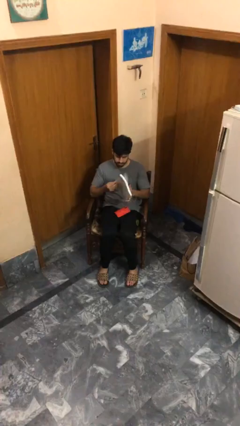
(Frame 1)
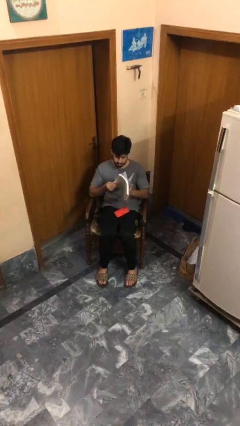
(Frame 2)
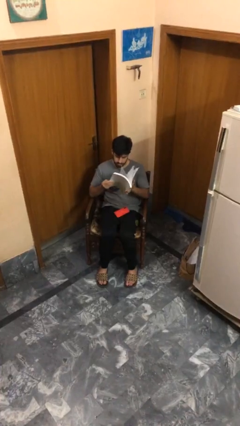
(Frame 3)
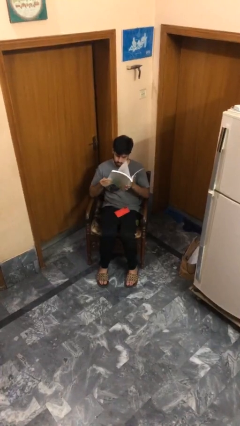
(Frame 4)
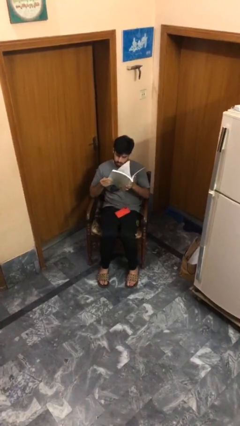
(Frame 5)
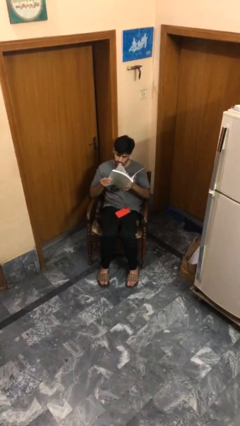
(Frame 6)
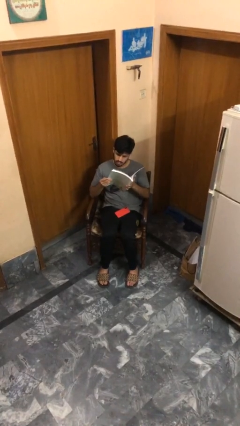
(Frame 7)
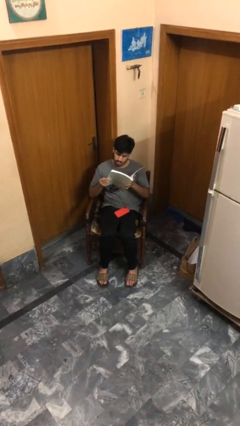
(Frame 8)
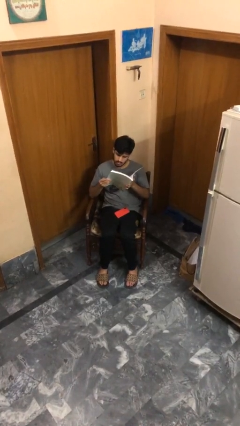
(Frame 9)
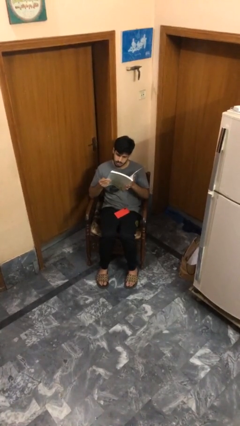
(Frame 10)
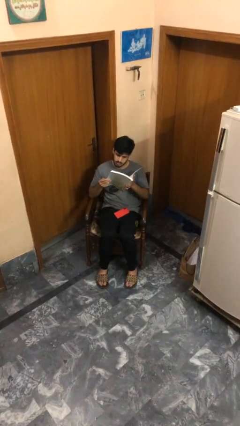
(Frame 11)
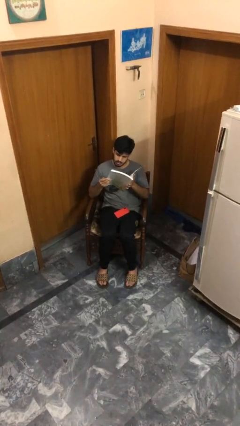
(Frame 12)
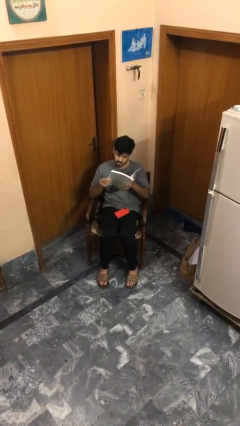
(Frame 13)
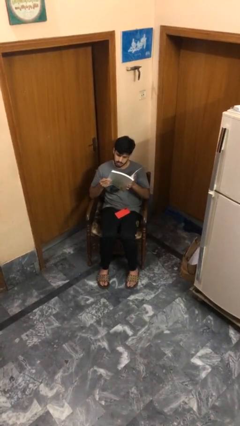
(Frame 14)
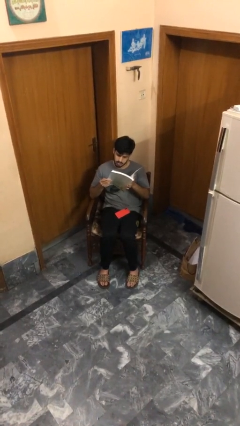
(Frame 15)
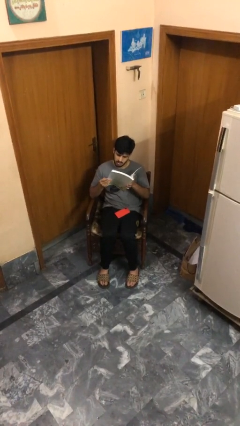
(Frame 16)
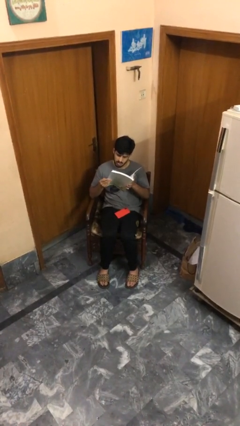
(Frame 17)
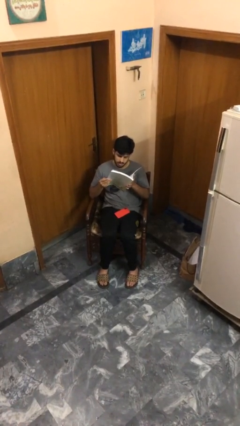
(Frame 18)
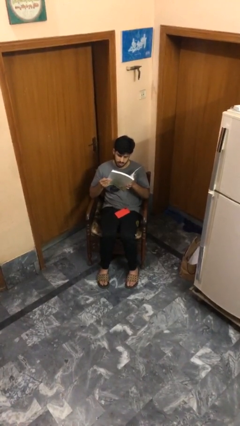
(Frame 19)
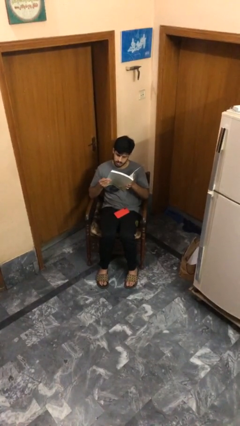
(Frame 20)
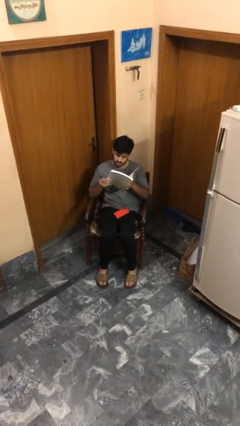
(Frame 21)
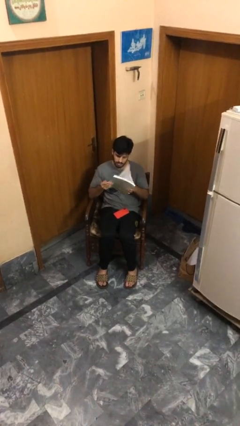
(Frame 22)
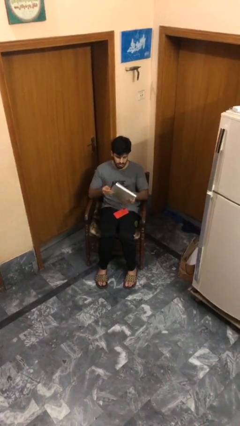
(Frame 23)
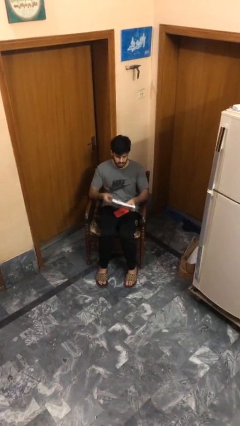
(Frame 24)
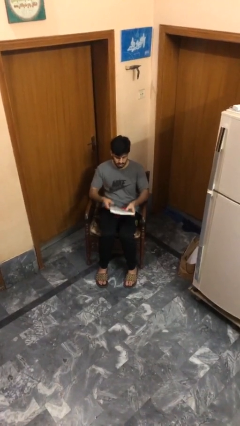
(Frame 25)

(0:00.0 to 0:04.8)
person reads book

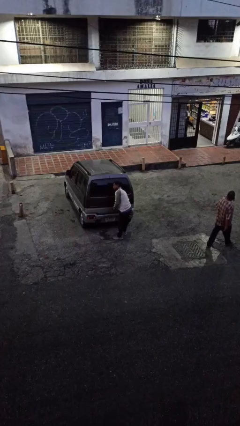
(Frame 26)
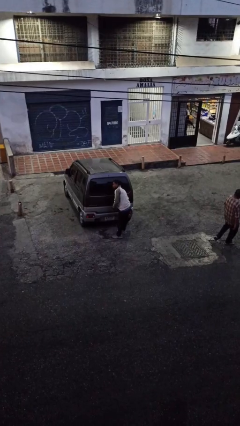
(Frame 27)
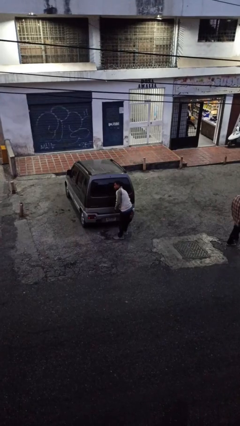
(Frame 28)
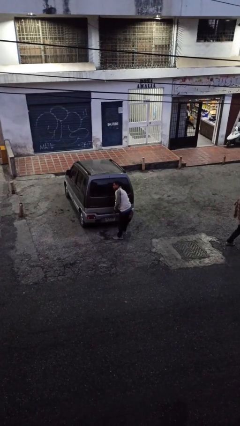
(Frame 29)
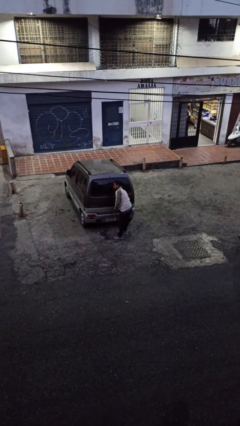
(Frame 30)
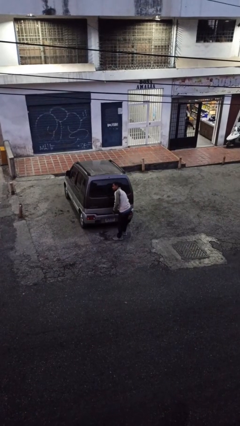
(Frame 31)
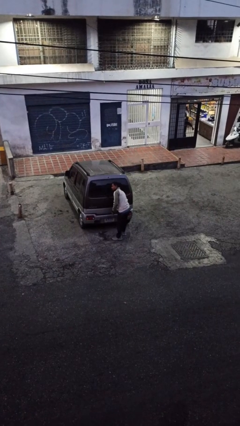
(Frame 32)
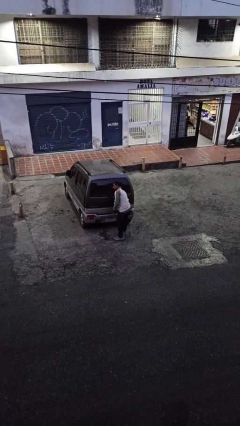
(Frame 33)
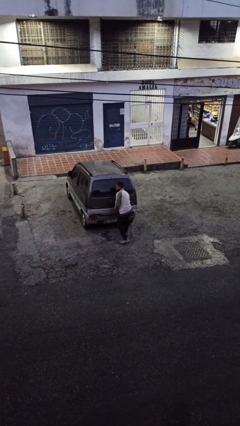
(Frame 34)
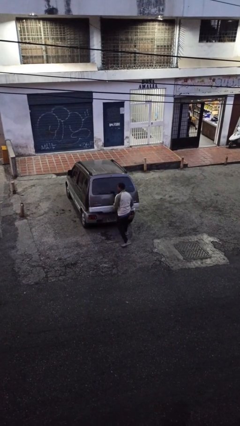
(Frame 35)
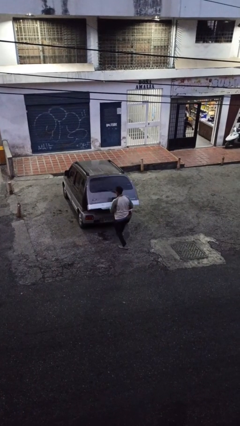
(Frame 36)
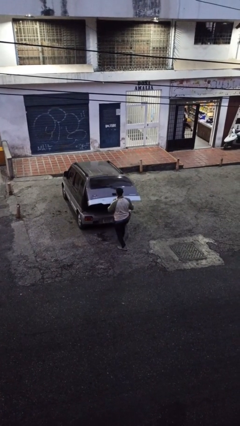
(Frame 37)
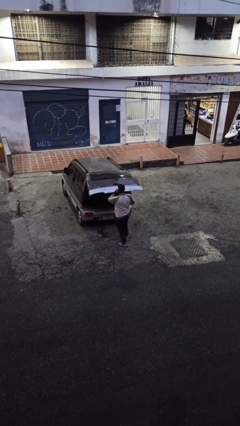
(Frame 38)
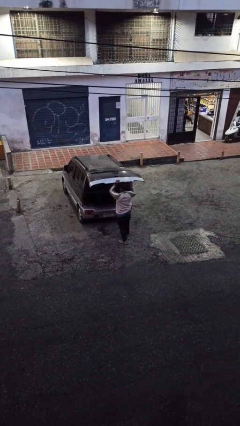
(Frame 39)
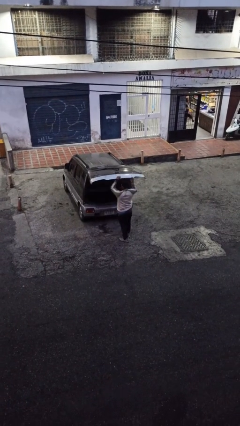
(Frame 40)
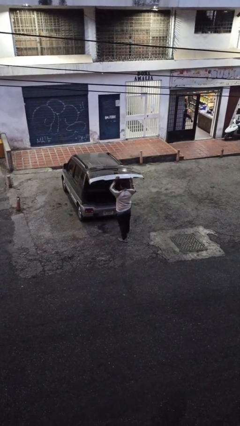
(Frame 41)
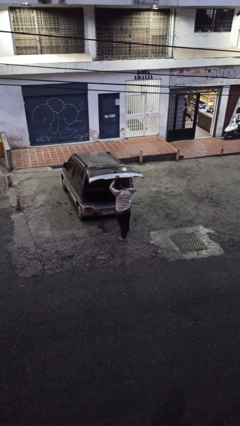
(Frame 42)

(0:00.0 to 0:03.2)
person opens car trunk

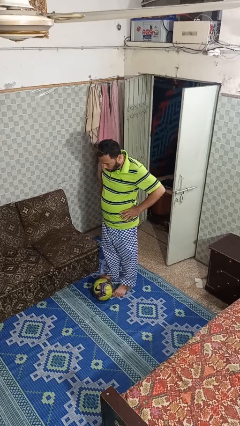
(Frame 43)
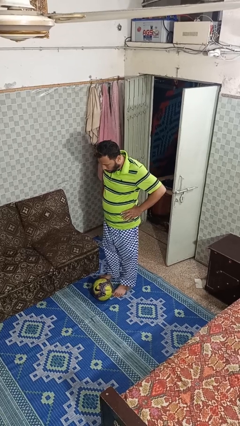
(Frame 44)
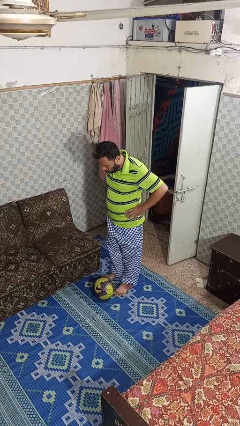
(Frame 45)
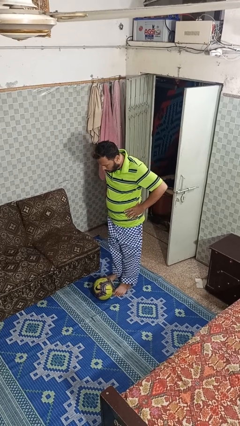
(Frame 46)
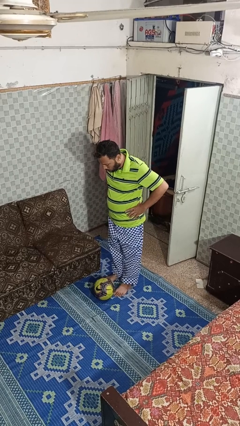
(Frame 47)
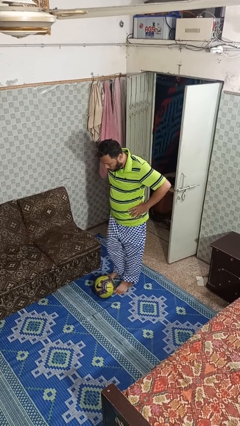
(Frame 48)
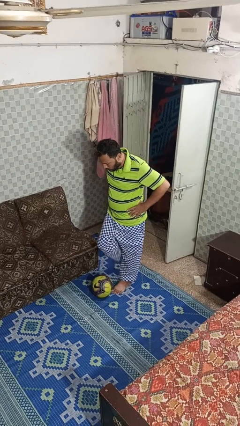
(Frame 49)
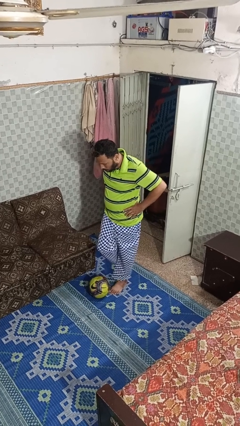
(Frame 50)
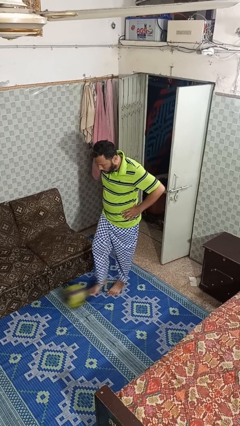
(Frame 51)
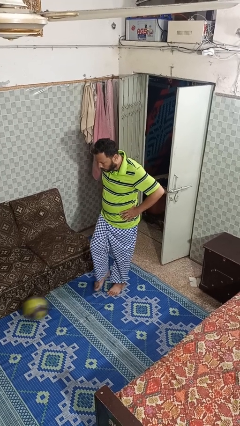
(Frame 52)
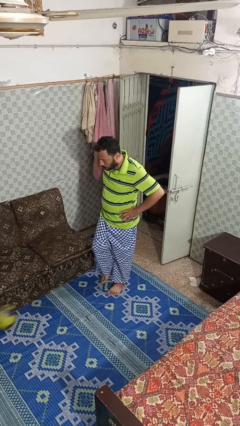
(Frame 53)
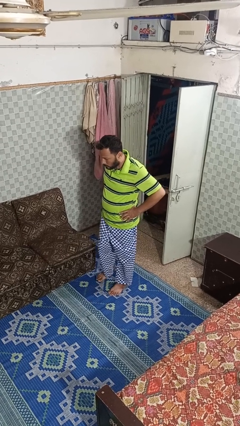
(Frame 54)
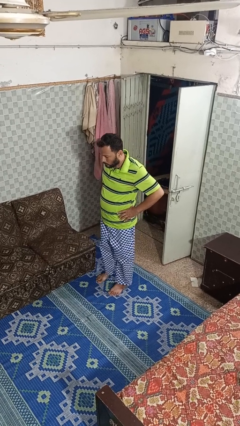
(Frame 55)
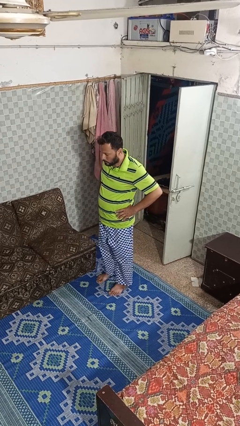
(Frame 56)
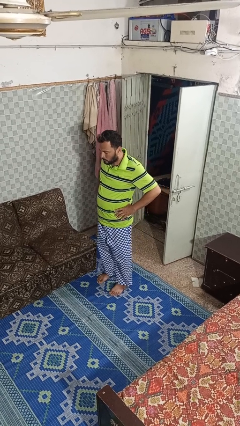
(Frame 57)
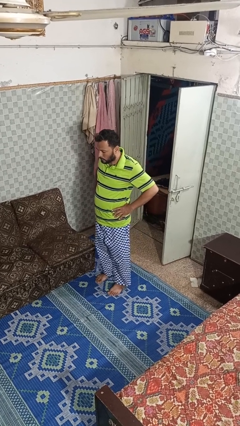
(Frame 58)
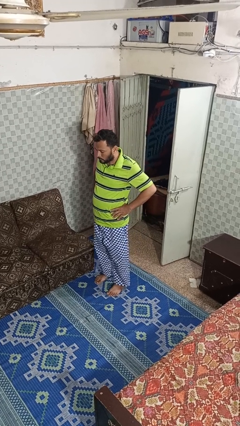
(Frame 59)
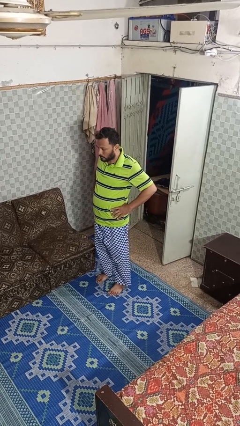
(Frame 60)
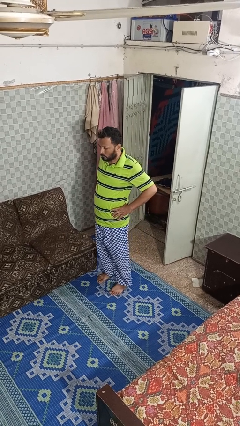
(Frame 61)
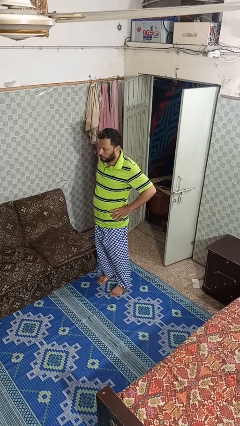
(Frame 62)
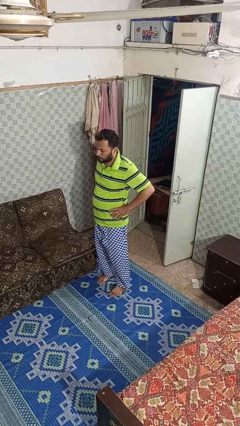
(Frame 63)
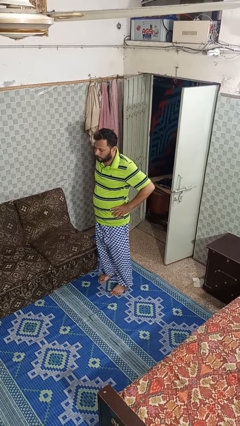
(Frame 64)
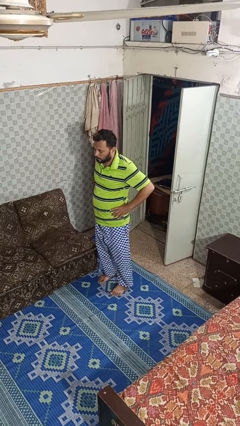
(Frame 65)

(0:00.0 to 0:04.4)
person kicks object to person

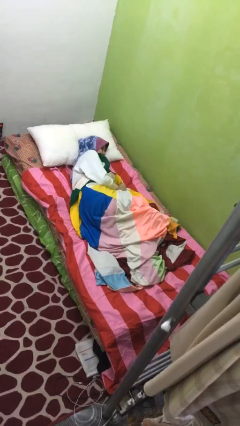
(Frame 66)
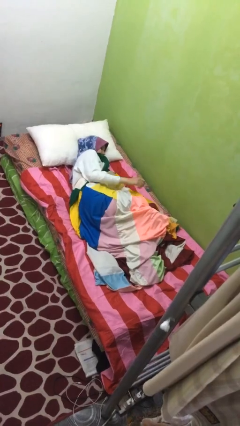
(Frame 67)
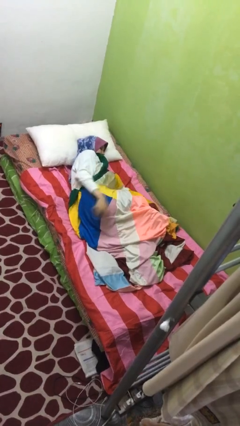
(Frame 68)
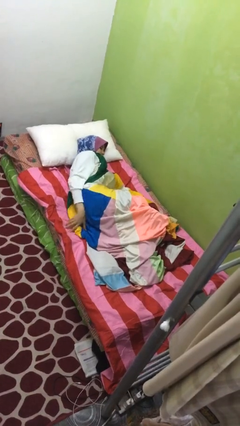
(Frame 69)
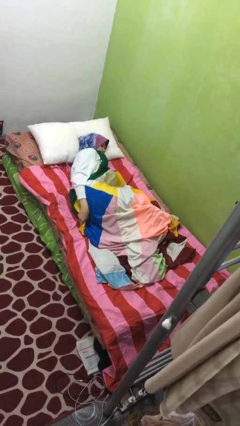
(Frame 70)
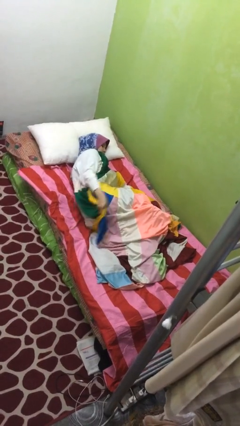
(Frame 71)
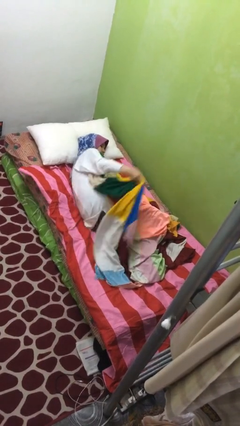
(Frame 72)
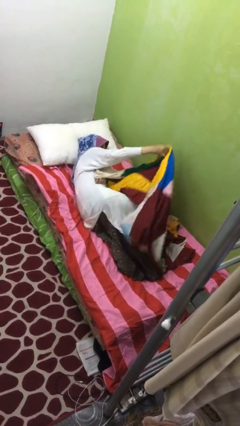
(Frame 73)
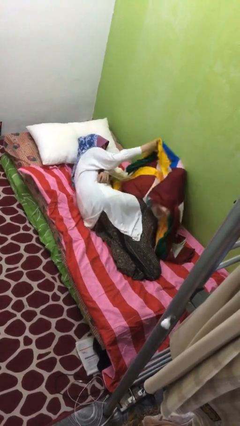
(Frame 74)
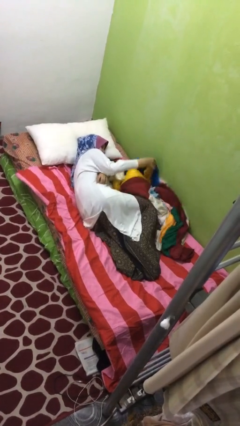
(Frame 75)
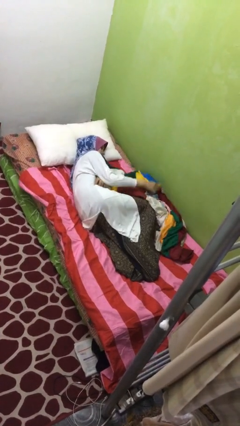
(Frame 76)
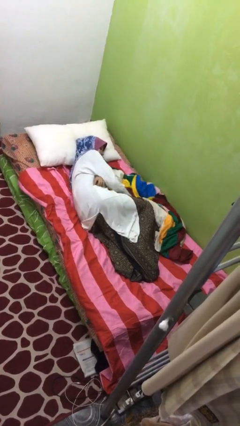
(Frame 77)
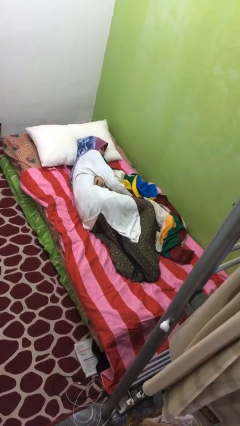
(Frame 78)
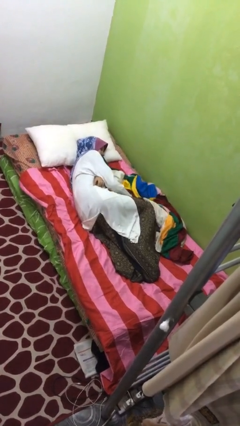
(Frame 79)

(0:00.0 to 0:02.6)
person uncovers with blanket

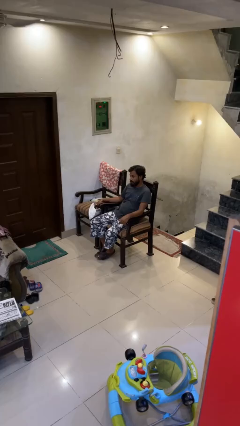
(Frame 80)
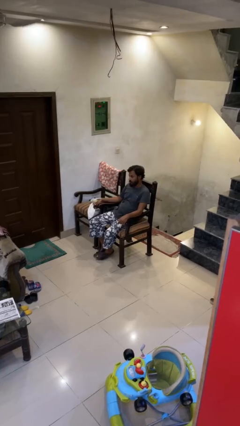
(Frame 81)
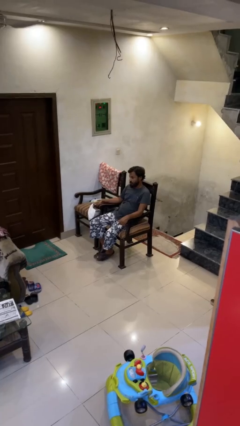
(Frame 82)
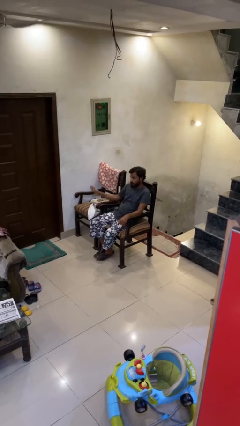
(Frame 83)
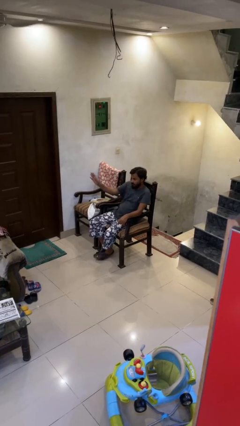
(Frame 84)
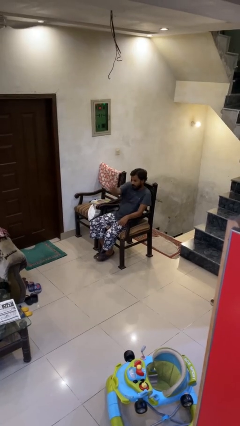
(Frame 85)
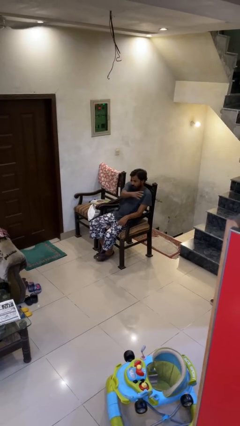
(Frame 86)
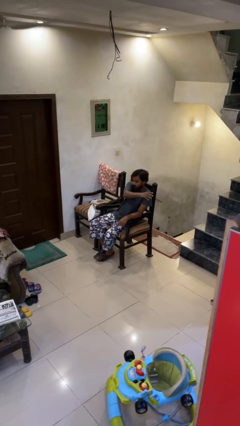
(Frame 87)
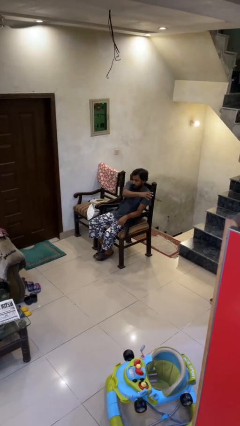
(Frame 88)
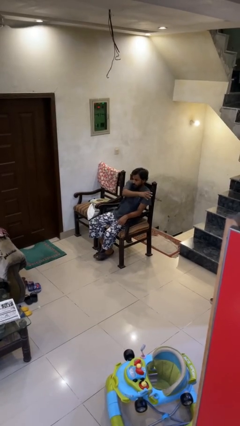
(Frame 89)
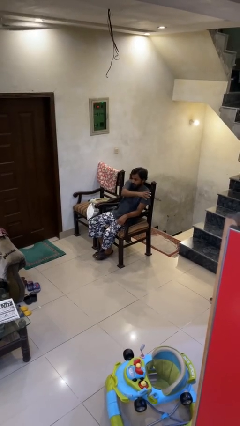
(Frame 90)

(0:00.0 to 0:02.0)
person gestures swipe left

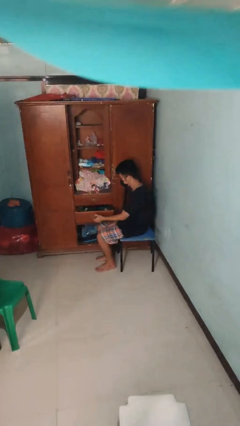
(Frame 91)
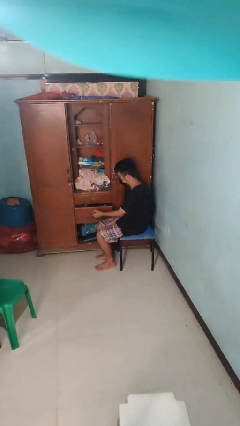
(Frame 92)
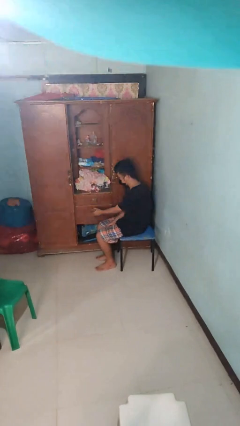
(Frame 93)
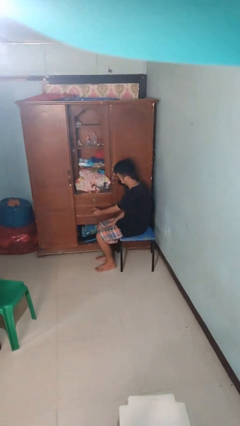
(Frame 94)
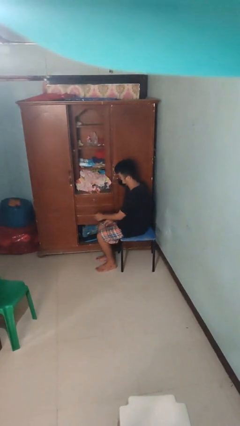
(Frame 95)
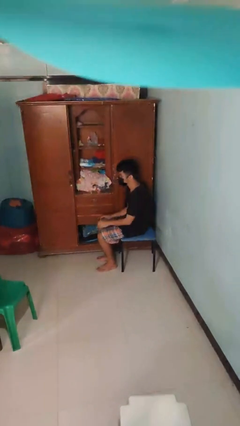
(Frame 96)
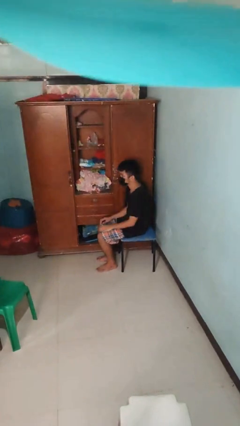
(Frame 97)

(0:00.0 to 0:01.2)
person closes dresser drawer
